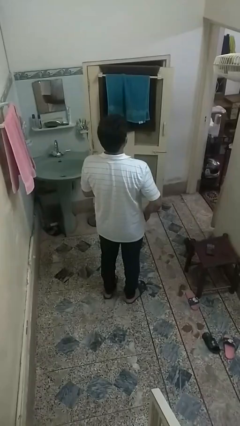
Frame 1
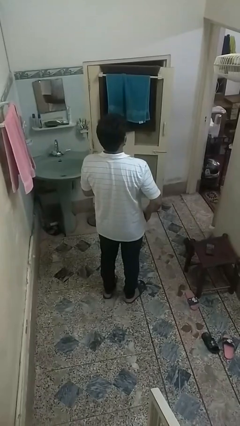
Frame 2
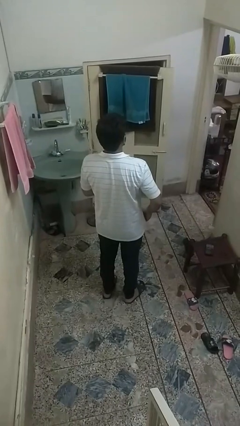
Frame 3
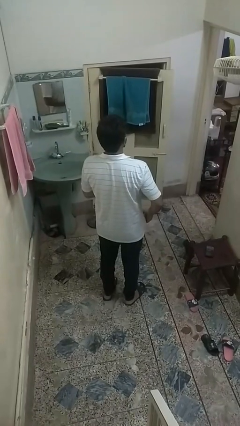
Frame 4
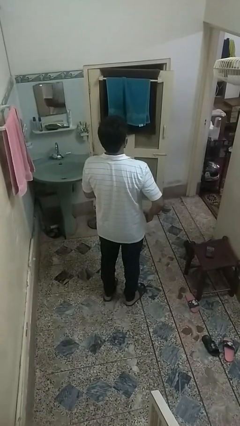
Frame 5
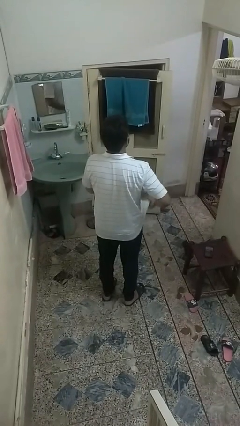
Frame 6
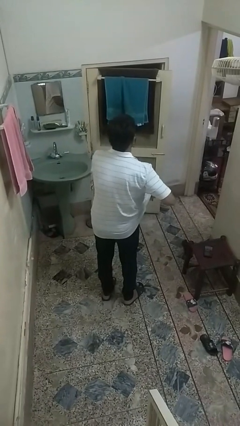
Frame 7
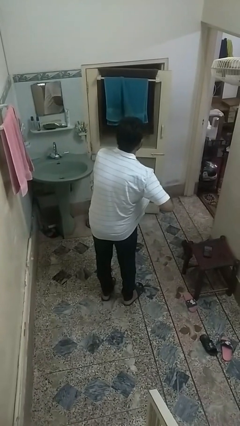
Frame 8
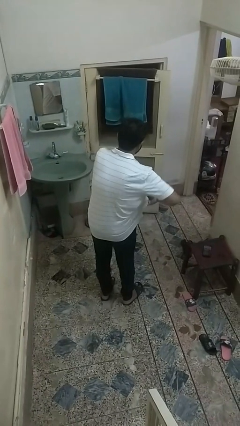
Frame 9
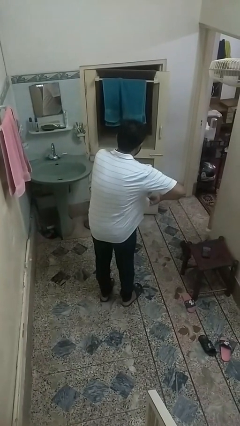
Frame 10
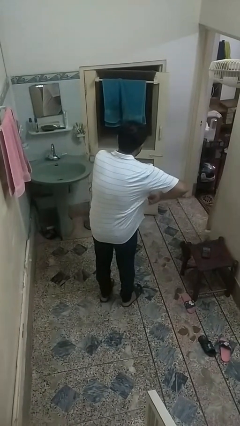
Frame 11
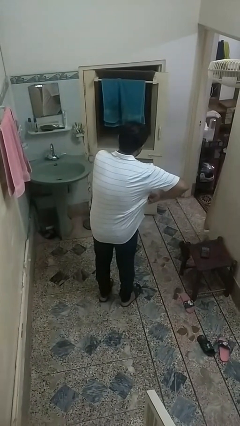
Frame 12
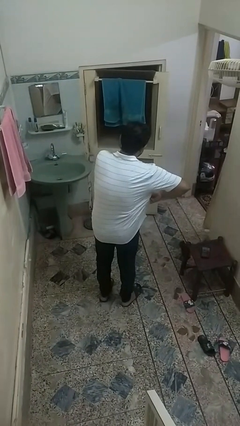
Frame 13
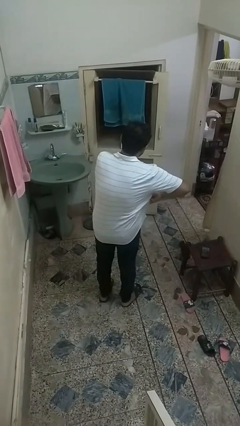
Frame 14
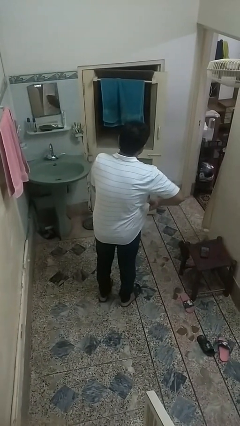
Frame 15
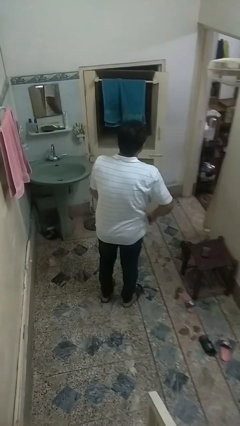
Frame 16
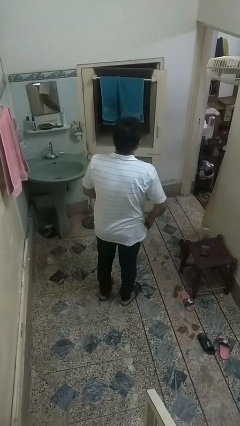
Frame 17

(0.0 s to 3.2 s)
person applies deodorant

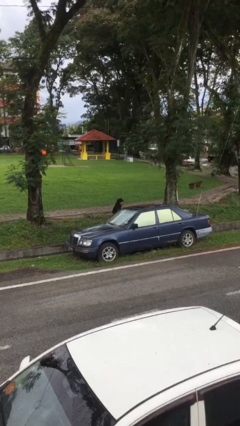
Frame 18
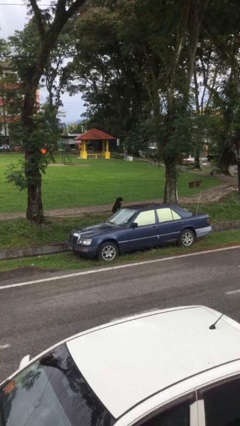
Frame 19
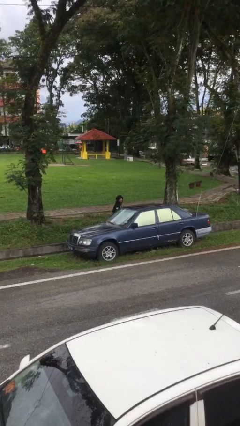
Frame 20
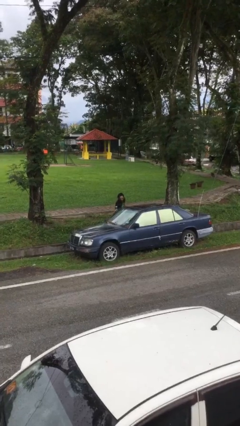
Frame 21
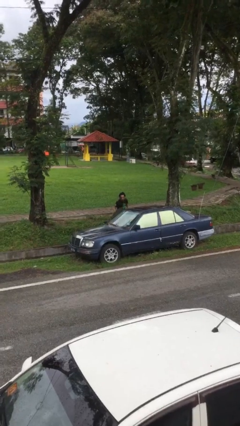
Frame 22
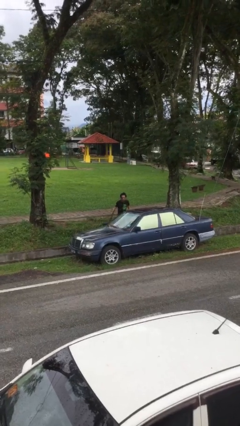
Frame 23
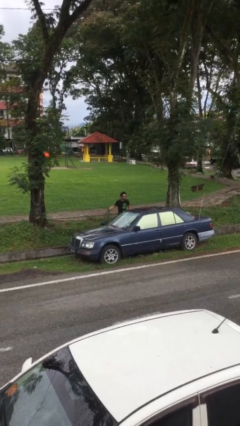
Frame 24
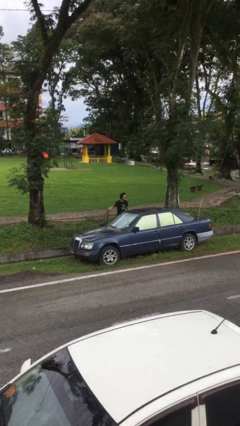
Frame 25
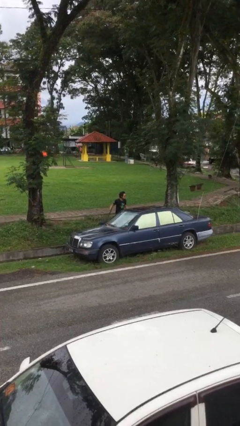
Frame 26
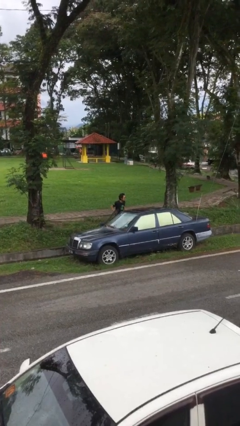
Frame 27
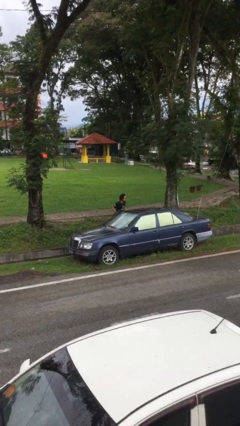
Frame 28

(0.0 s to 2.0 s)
person opens car door

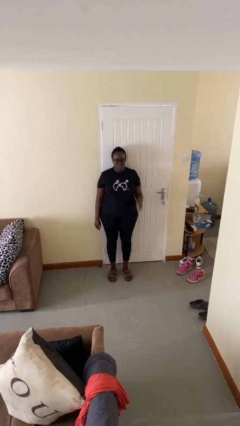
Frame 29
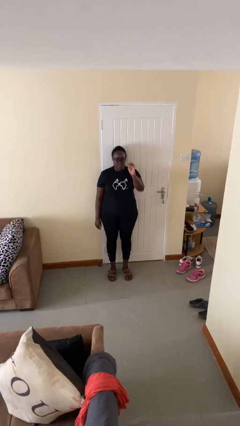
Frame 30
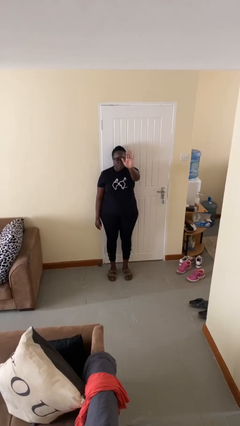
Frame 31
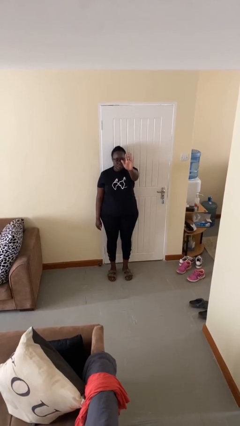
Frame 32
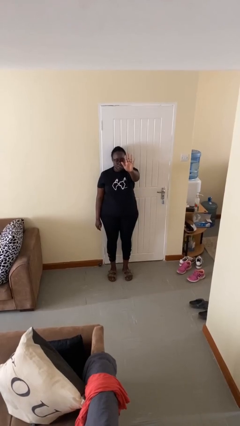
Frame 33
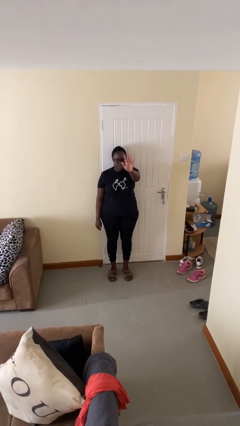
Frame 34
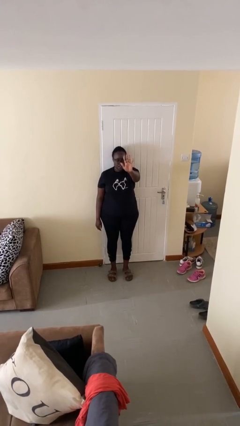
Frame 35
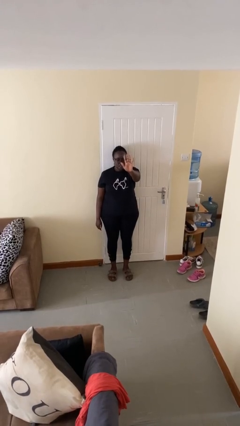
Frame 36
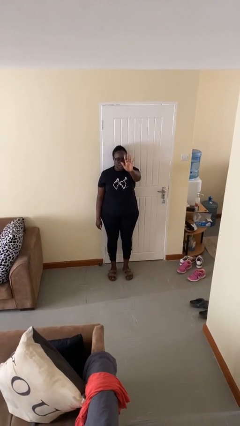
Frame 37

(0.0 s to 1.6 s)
person gestures number five

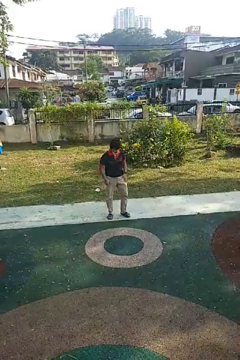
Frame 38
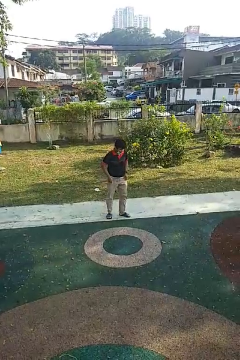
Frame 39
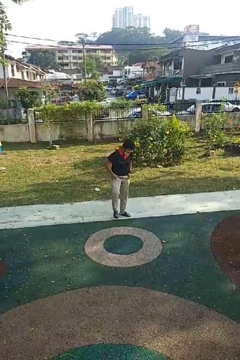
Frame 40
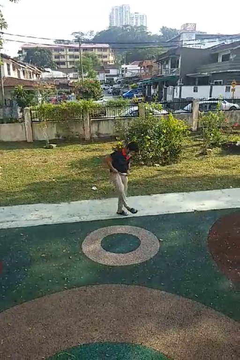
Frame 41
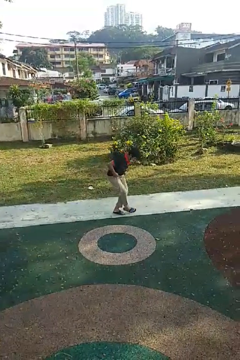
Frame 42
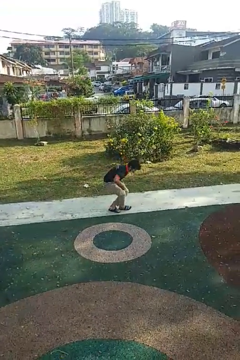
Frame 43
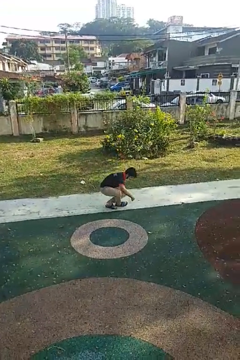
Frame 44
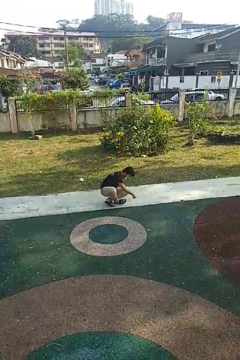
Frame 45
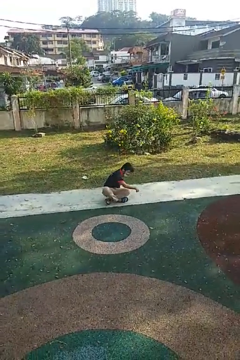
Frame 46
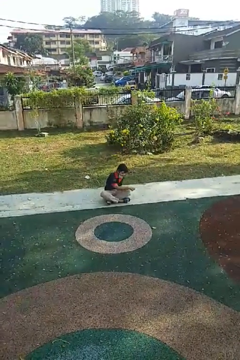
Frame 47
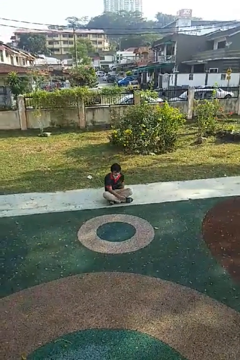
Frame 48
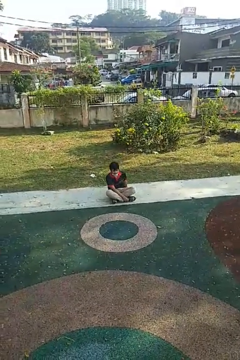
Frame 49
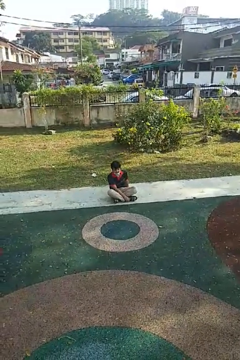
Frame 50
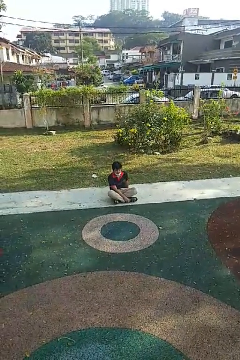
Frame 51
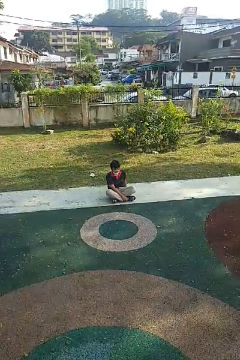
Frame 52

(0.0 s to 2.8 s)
person sits crisscross

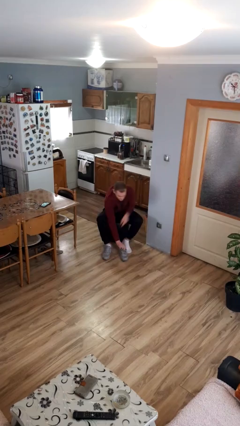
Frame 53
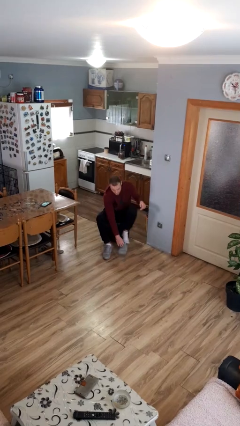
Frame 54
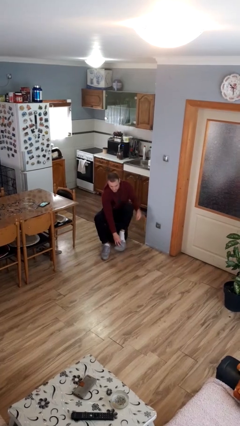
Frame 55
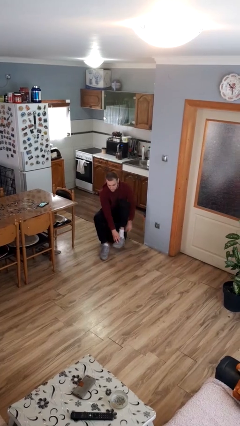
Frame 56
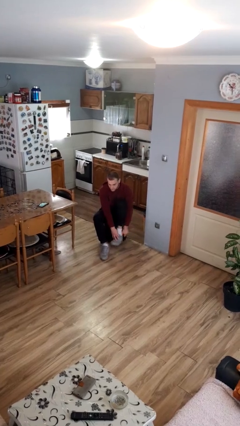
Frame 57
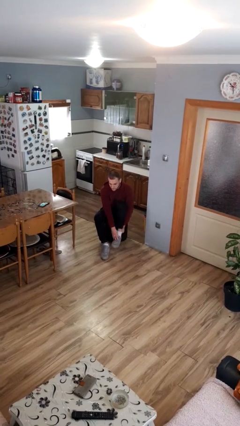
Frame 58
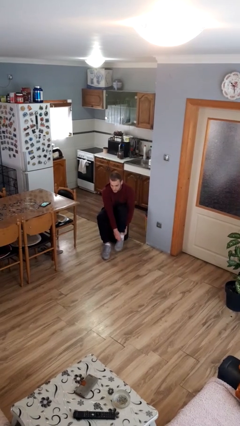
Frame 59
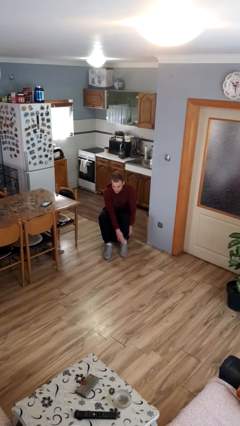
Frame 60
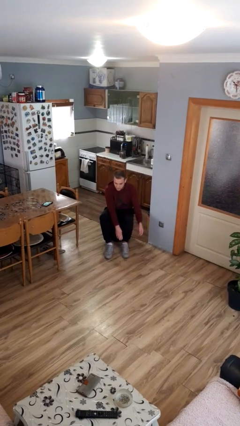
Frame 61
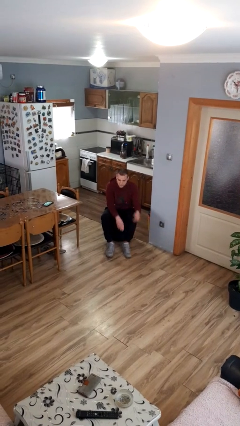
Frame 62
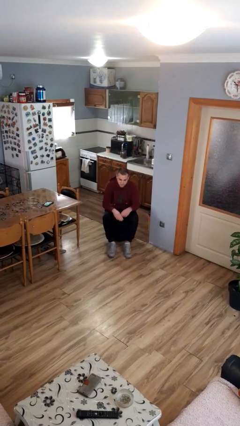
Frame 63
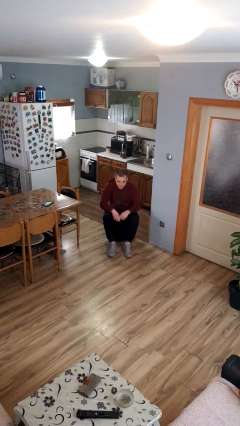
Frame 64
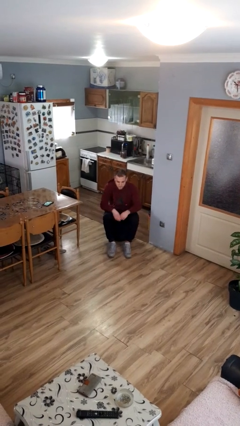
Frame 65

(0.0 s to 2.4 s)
person puts on shoes

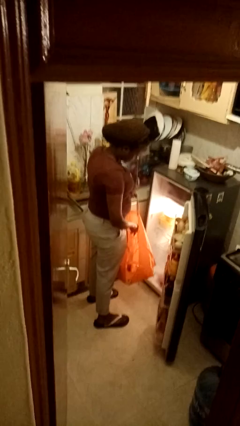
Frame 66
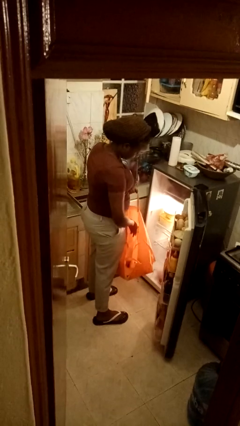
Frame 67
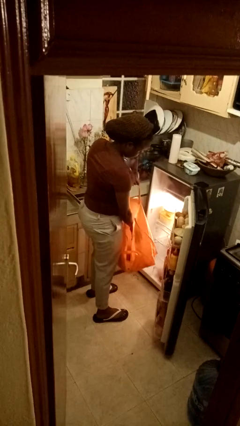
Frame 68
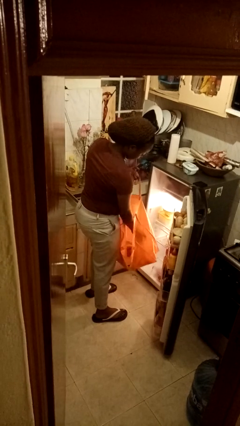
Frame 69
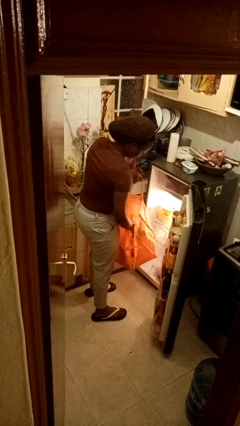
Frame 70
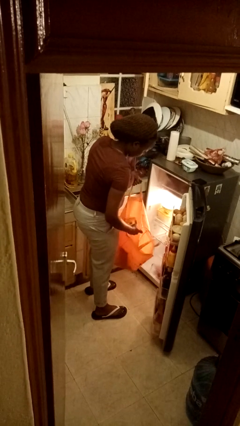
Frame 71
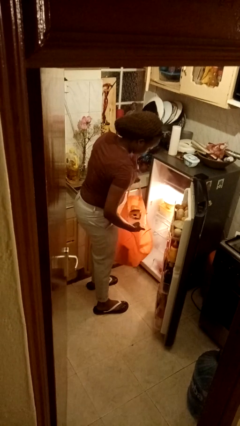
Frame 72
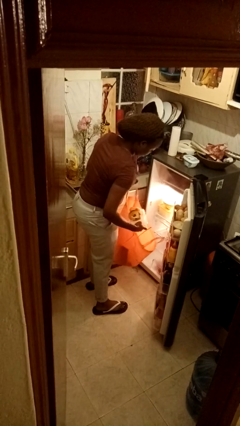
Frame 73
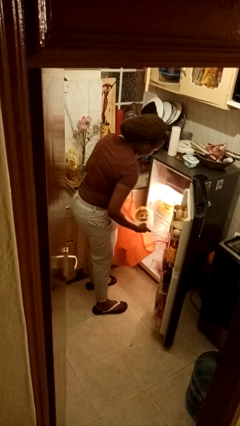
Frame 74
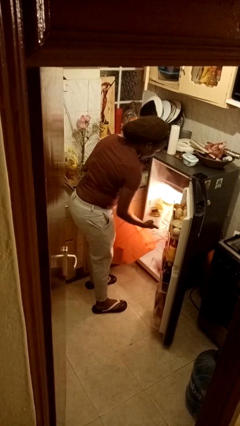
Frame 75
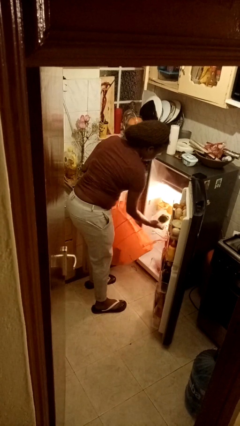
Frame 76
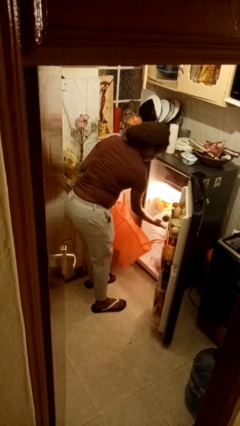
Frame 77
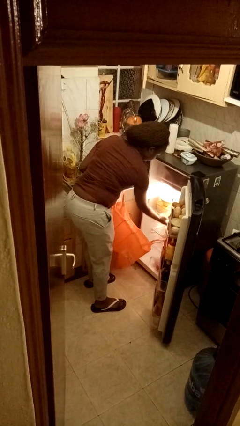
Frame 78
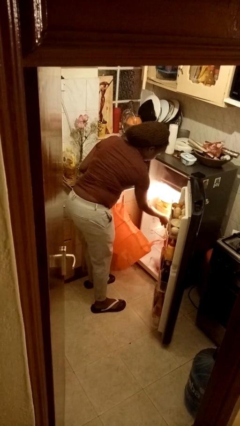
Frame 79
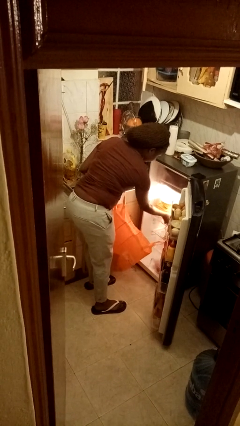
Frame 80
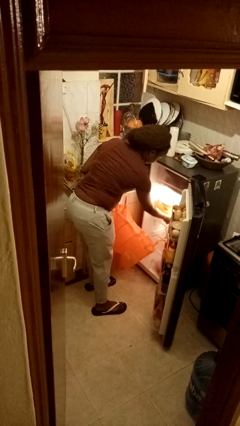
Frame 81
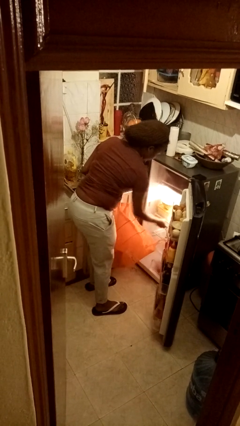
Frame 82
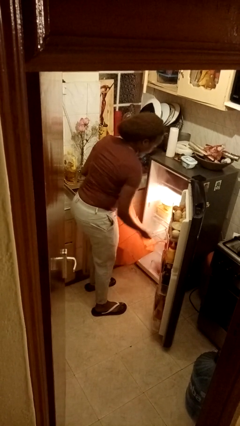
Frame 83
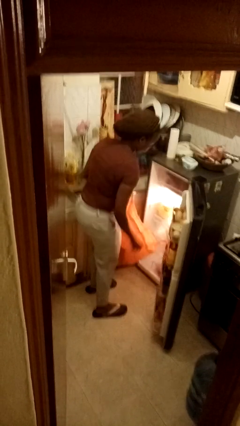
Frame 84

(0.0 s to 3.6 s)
person loads groceries into refrigerator

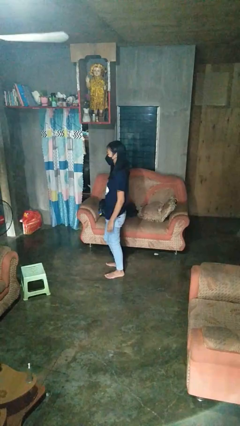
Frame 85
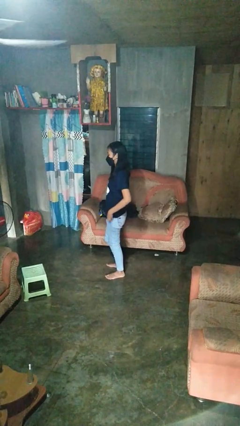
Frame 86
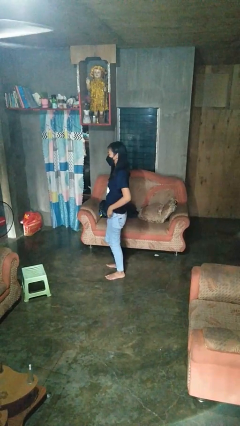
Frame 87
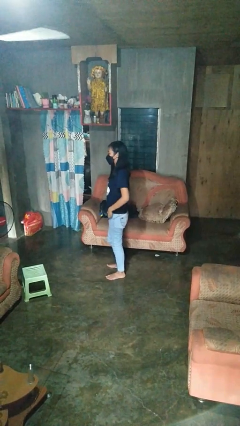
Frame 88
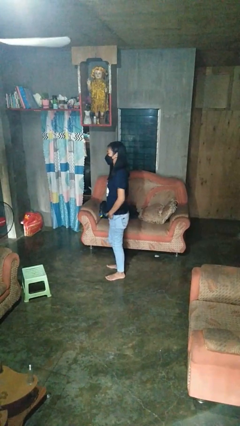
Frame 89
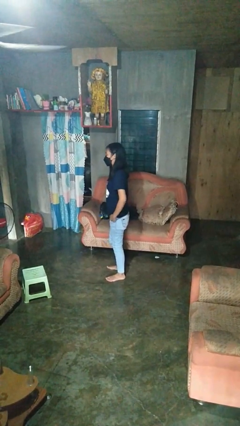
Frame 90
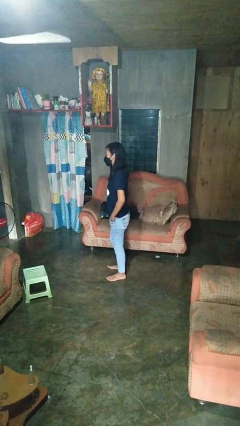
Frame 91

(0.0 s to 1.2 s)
person puts hands in back pockets

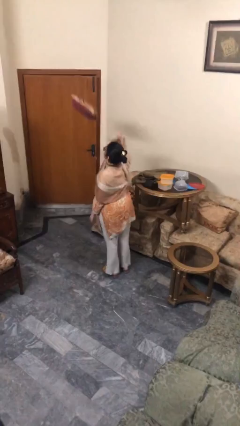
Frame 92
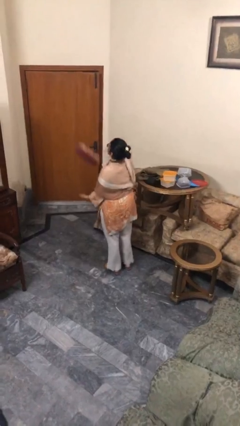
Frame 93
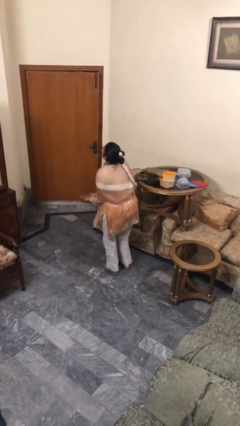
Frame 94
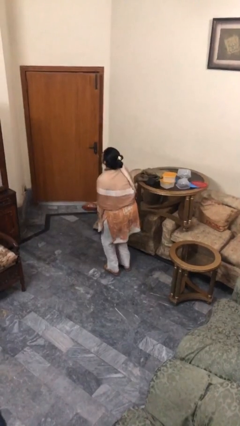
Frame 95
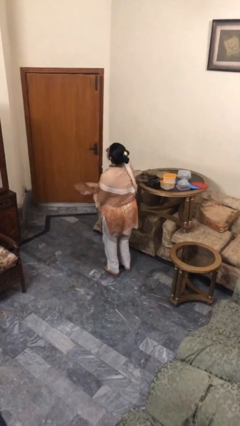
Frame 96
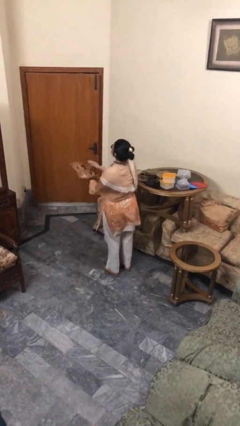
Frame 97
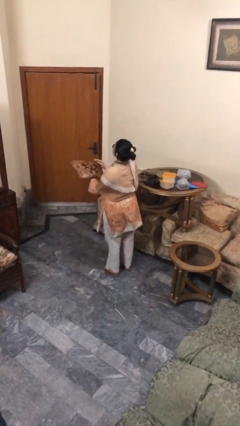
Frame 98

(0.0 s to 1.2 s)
person catches dropped object
